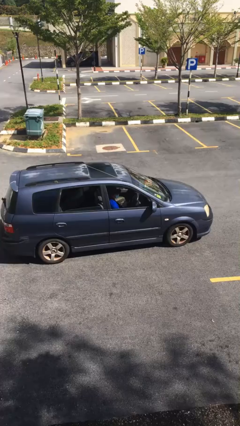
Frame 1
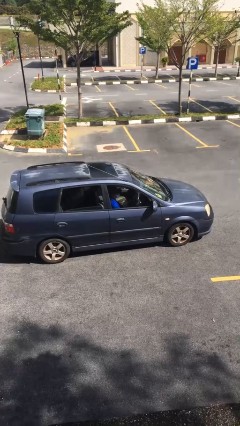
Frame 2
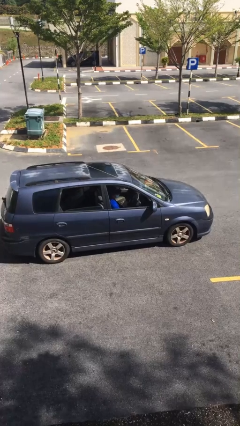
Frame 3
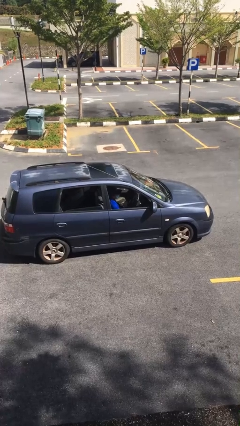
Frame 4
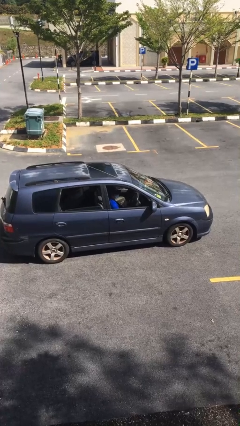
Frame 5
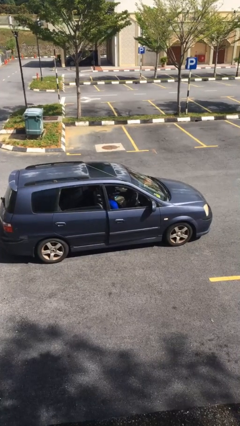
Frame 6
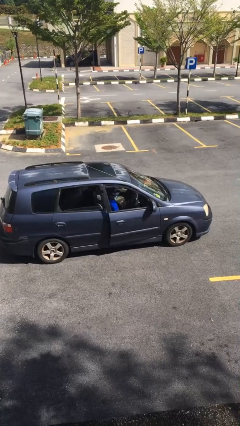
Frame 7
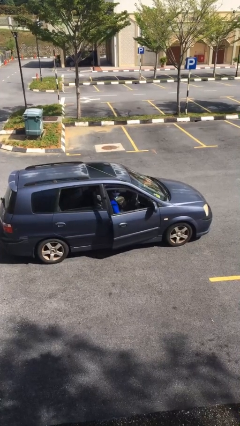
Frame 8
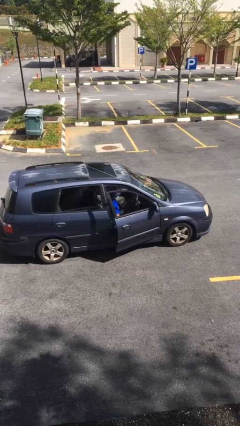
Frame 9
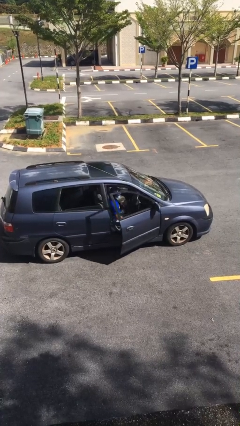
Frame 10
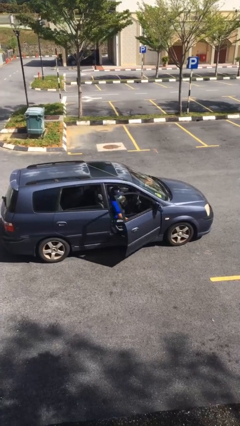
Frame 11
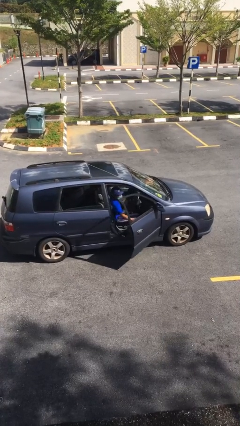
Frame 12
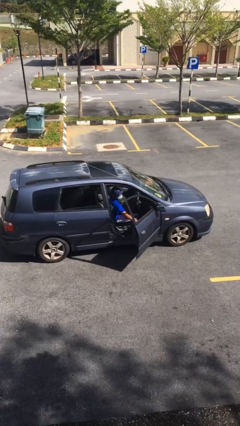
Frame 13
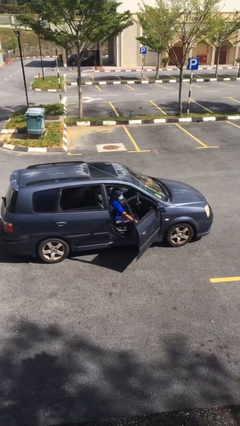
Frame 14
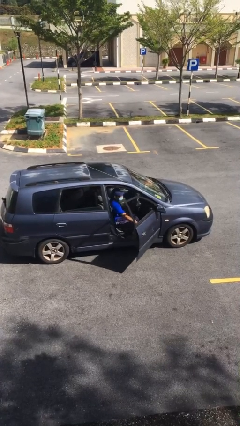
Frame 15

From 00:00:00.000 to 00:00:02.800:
person opens car door

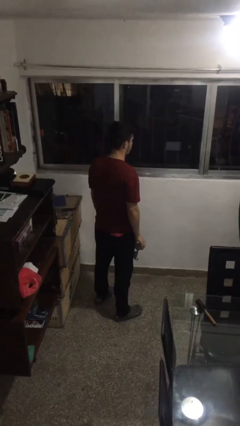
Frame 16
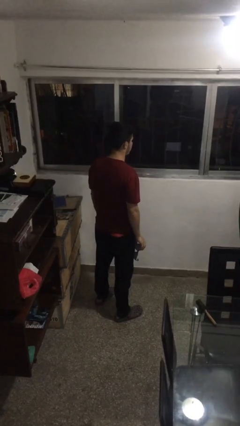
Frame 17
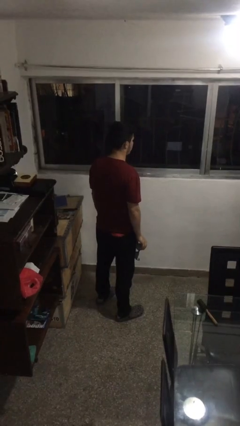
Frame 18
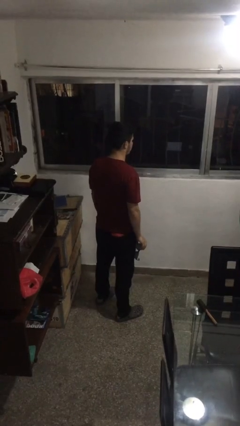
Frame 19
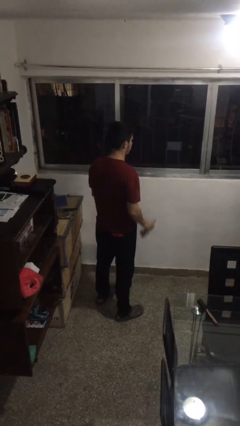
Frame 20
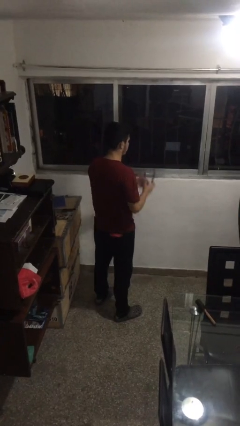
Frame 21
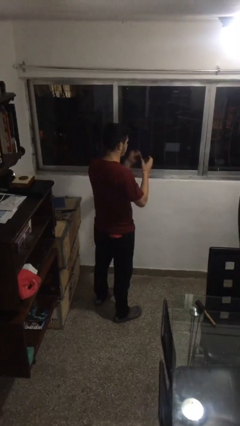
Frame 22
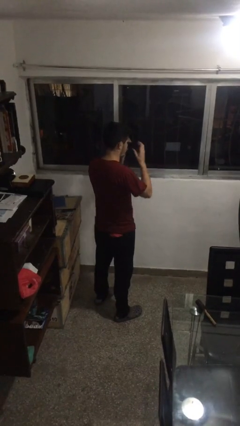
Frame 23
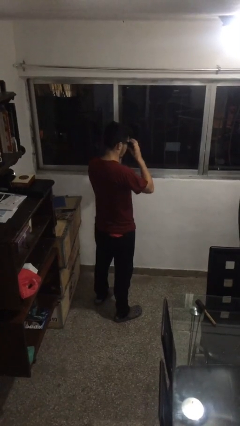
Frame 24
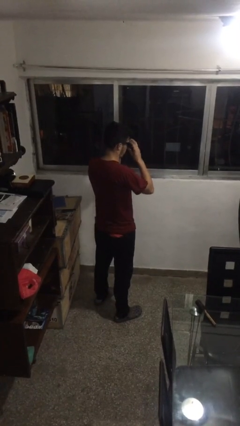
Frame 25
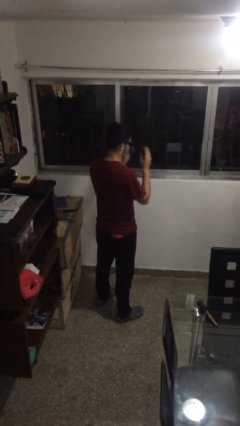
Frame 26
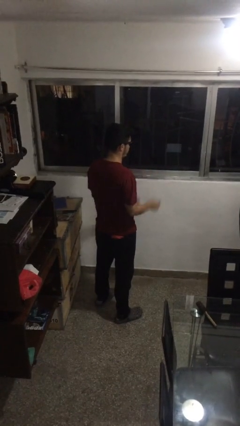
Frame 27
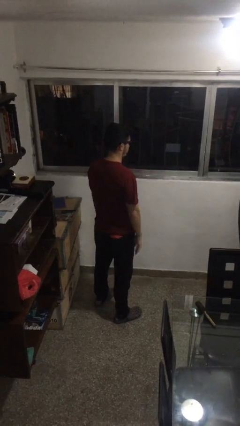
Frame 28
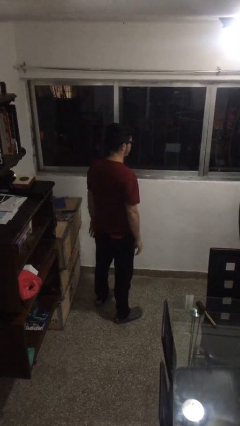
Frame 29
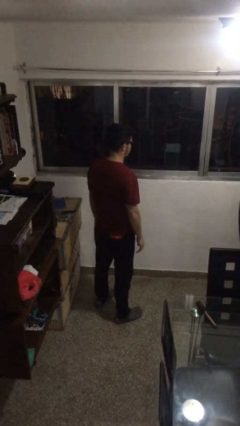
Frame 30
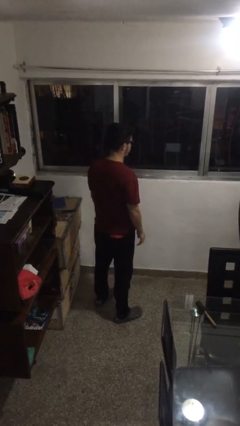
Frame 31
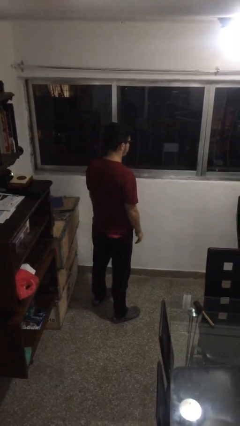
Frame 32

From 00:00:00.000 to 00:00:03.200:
person puts on sunglasses

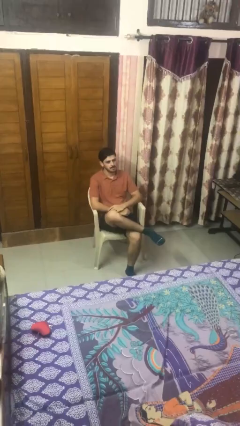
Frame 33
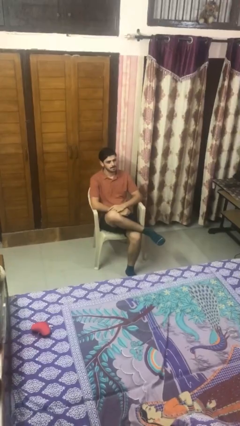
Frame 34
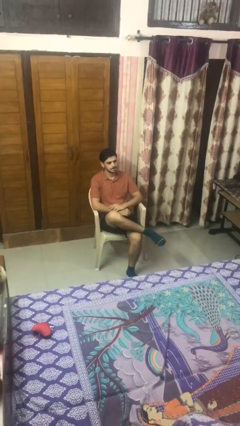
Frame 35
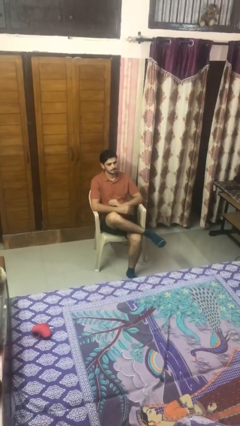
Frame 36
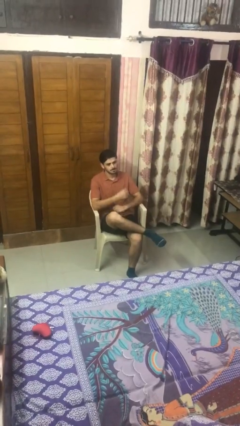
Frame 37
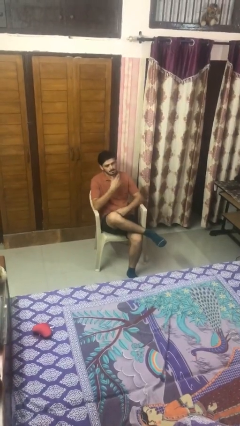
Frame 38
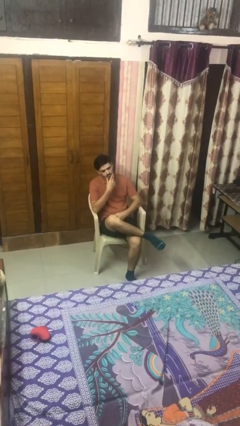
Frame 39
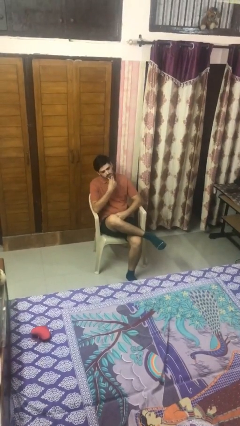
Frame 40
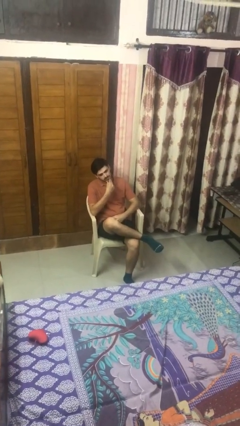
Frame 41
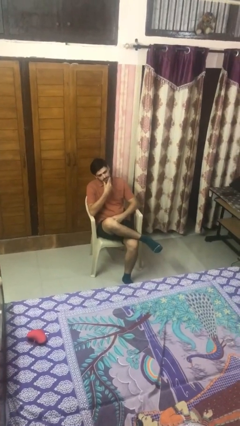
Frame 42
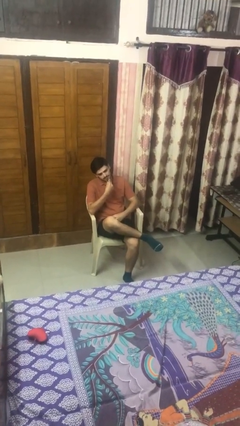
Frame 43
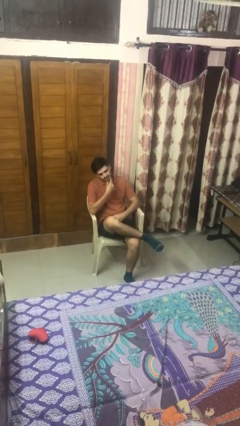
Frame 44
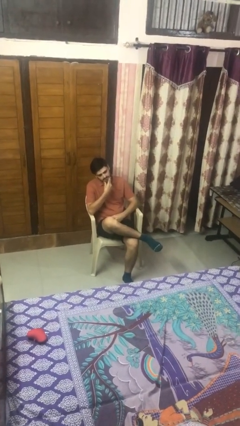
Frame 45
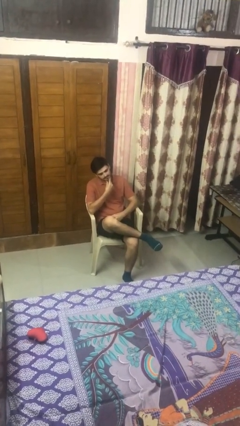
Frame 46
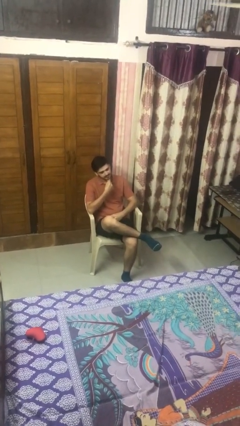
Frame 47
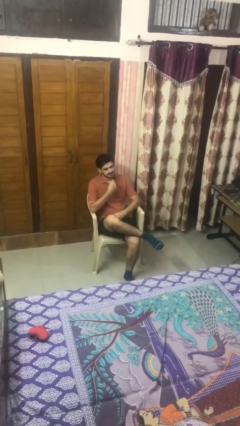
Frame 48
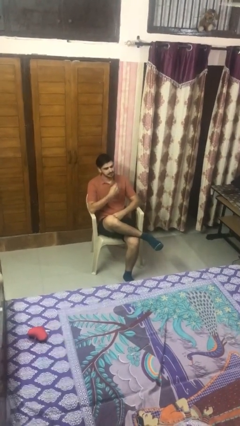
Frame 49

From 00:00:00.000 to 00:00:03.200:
person strokes chin

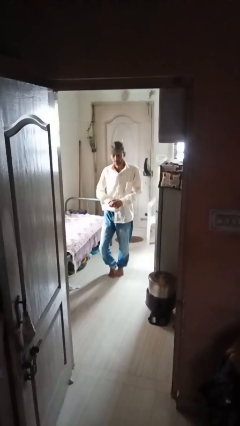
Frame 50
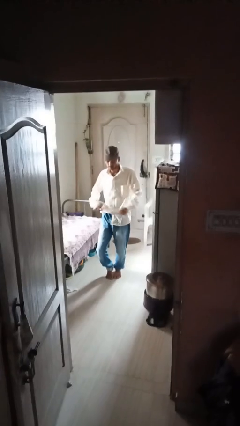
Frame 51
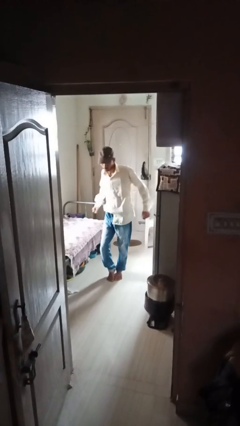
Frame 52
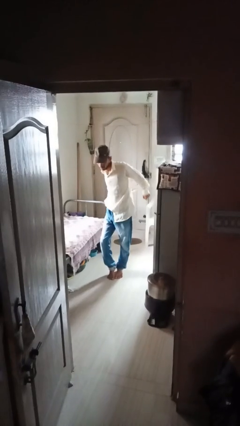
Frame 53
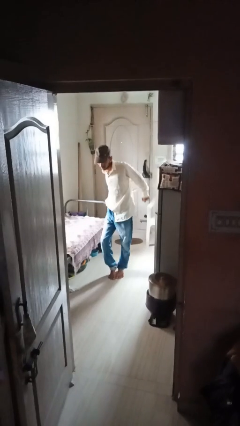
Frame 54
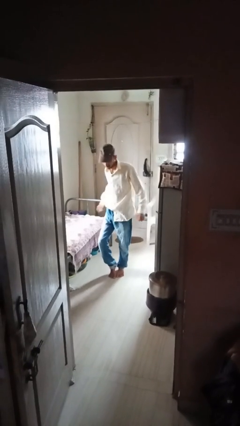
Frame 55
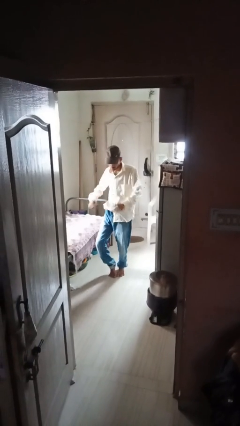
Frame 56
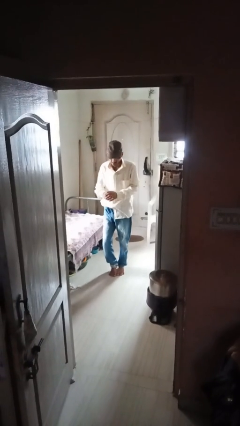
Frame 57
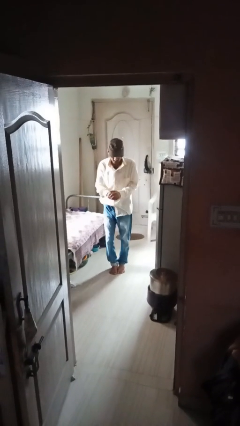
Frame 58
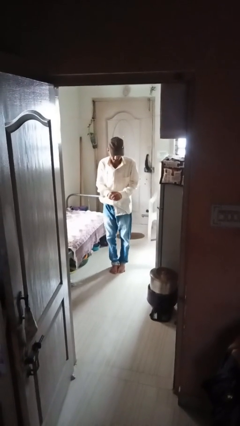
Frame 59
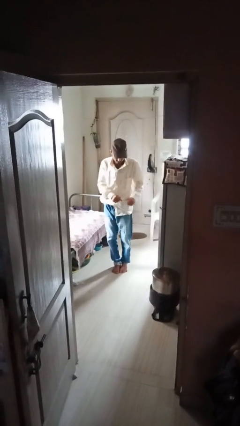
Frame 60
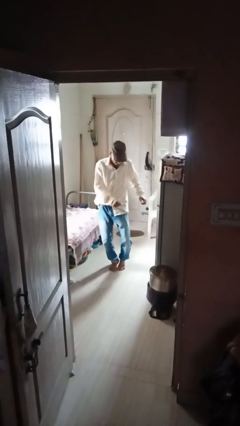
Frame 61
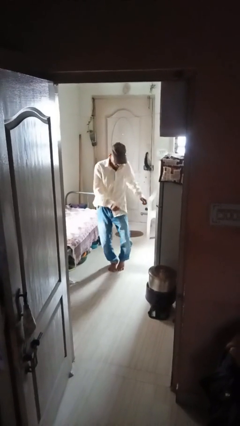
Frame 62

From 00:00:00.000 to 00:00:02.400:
person dances in place

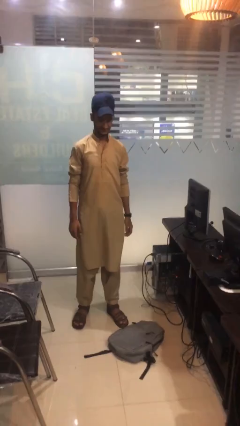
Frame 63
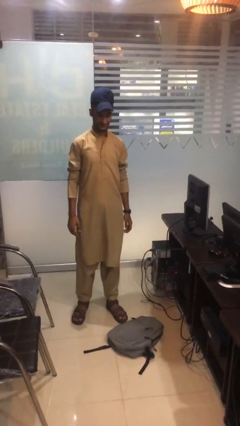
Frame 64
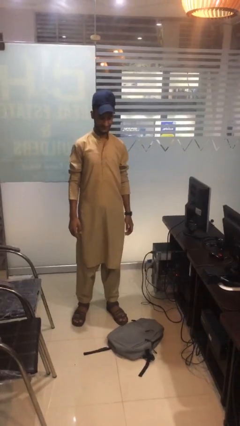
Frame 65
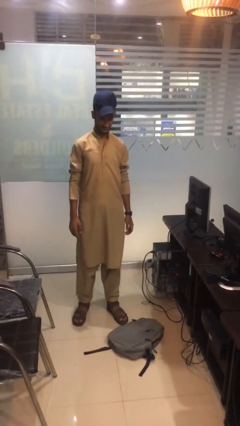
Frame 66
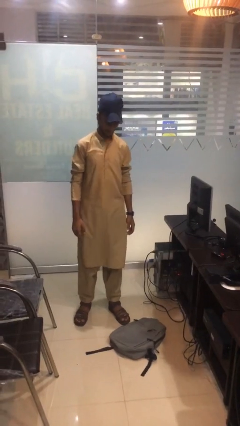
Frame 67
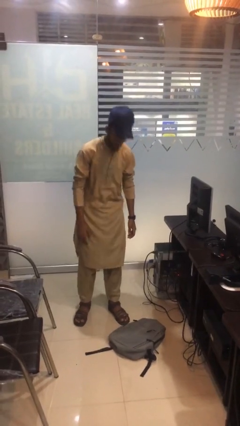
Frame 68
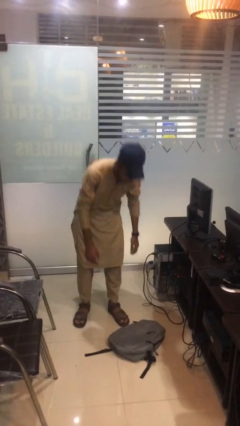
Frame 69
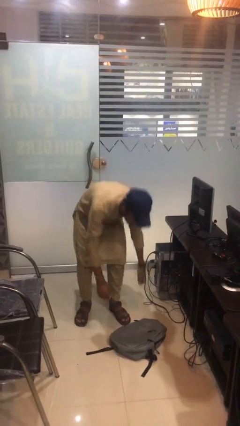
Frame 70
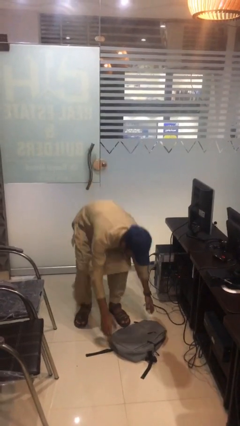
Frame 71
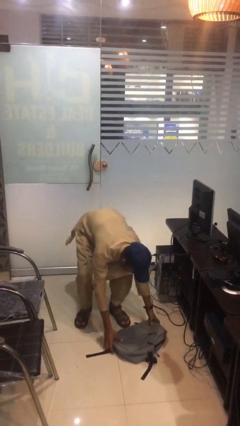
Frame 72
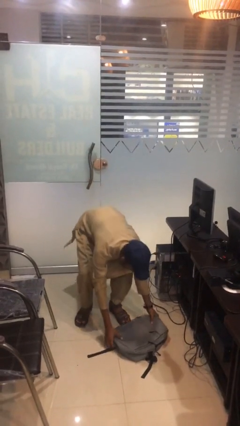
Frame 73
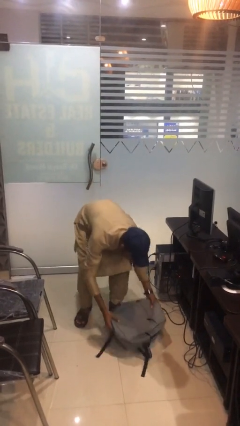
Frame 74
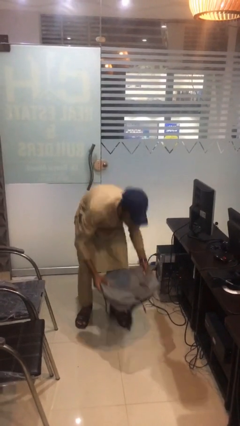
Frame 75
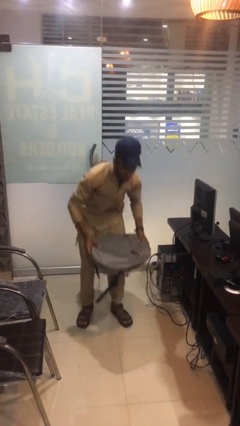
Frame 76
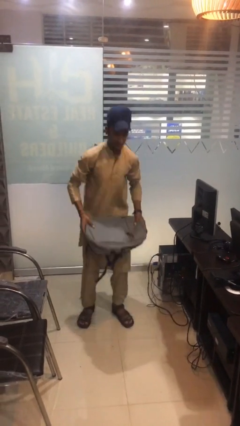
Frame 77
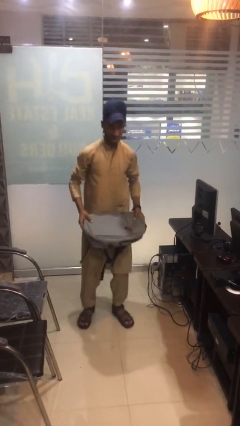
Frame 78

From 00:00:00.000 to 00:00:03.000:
person picks up object from floor

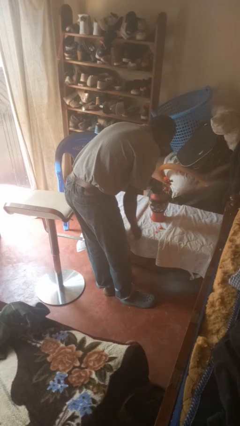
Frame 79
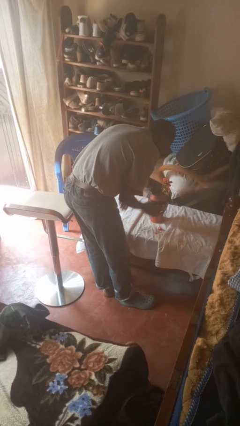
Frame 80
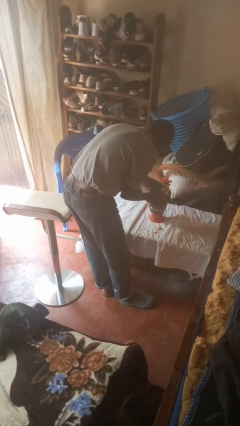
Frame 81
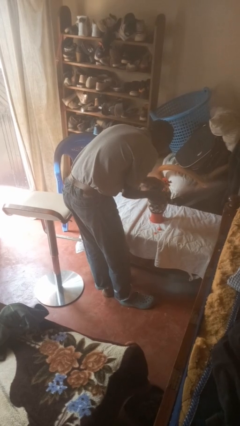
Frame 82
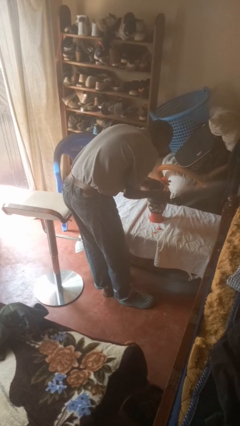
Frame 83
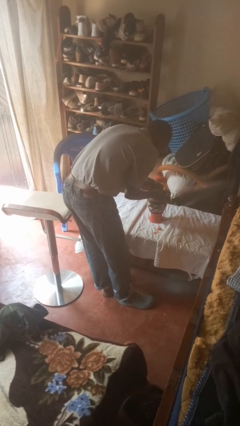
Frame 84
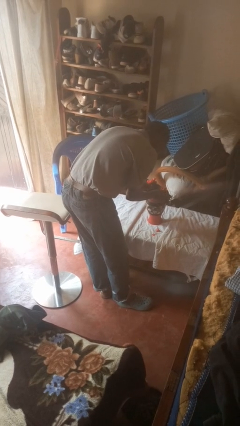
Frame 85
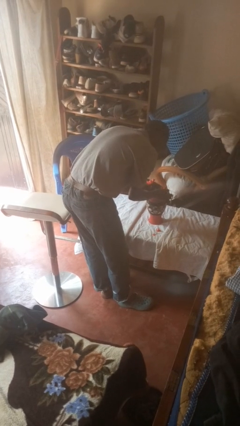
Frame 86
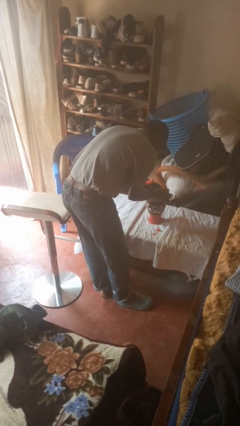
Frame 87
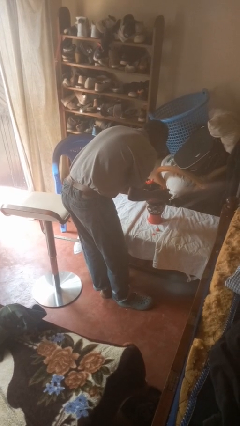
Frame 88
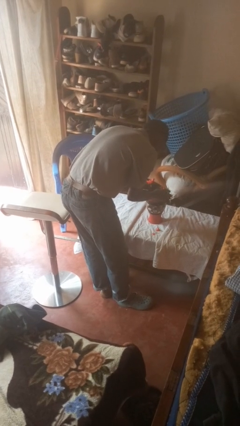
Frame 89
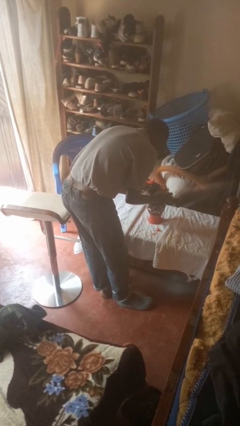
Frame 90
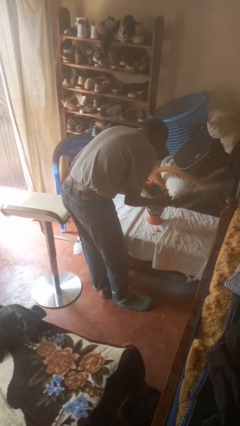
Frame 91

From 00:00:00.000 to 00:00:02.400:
person arranges flowers in vase
